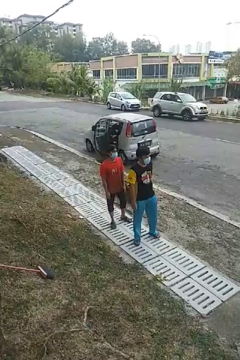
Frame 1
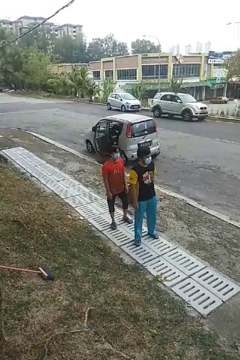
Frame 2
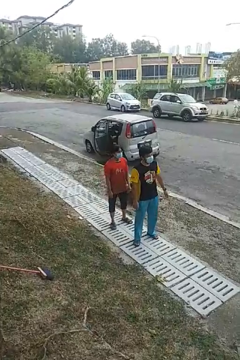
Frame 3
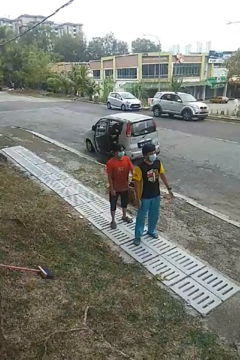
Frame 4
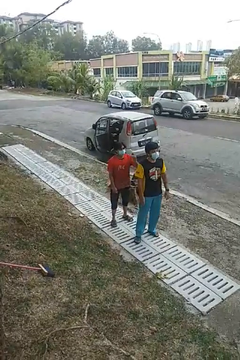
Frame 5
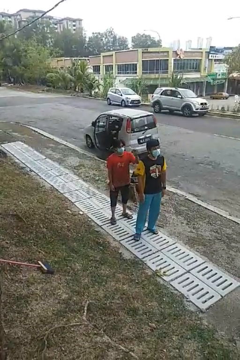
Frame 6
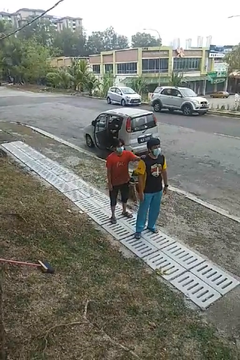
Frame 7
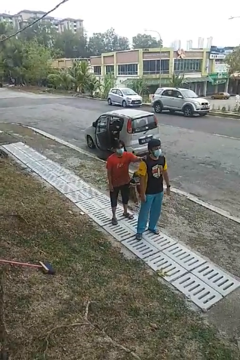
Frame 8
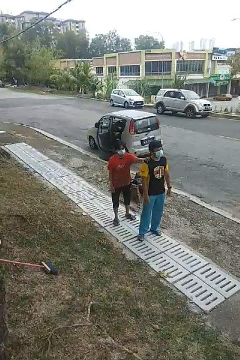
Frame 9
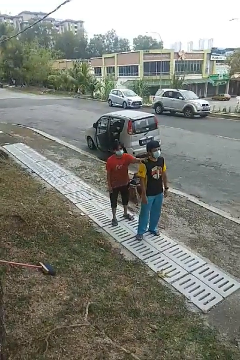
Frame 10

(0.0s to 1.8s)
person grabs person by shoulder

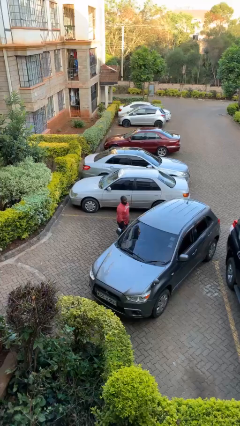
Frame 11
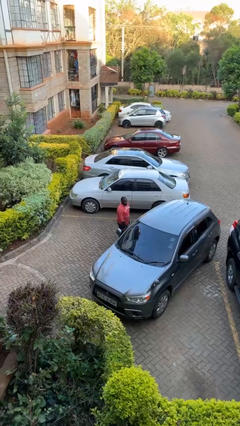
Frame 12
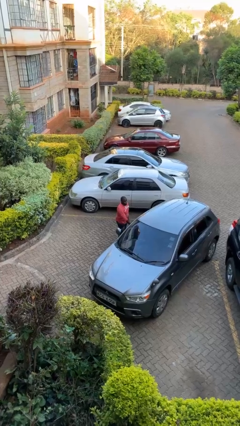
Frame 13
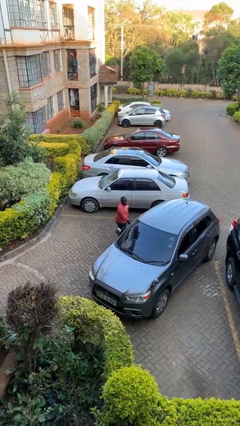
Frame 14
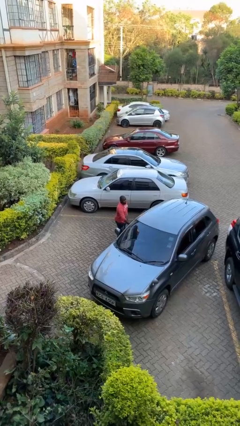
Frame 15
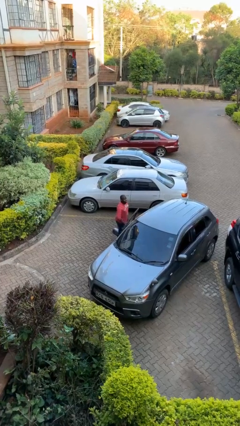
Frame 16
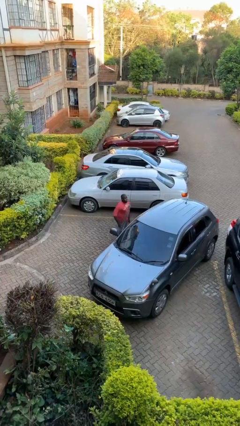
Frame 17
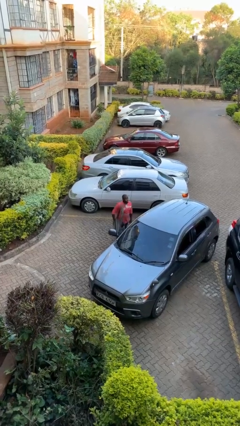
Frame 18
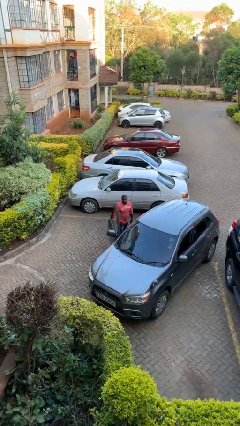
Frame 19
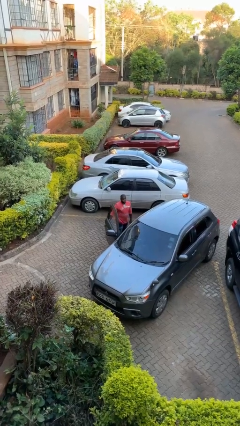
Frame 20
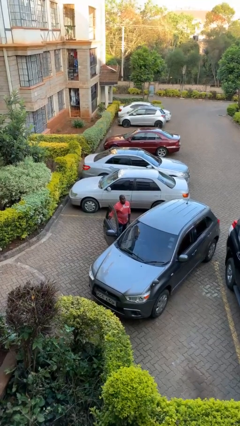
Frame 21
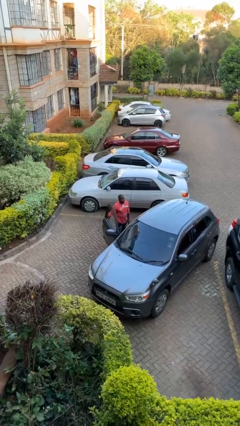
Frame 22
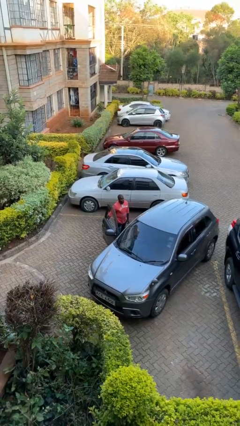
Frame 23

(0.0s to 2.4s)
person opens car door

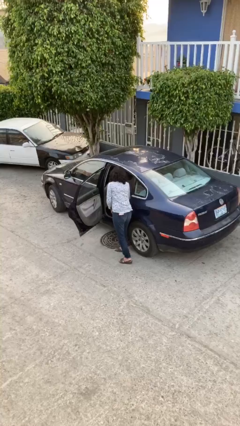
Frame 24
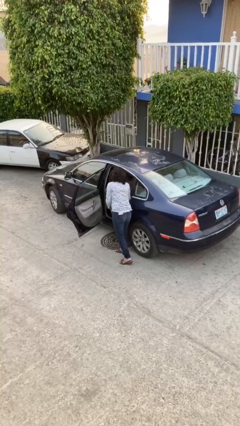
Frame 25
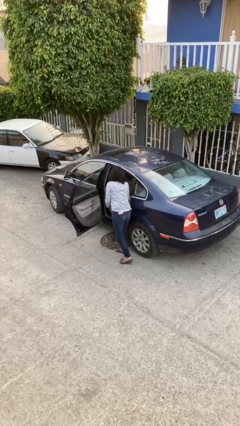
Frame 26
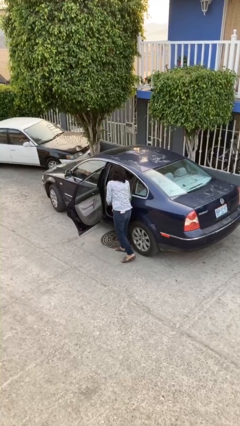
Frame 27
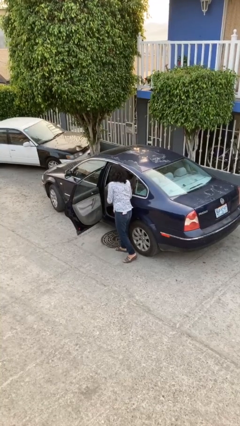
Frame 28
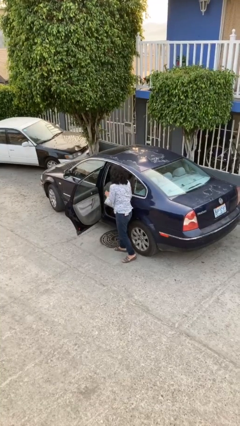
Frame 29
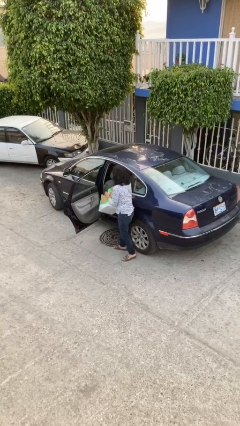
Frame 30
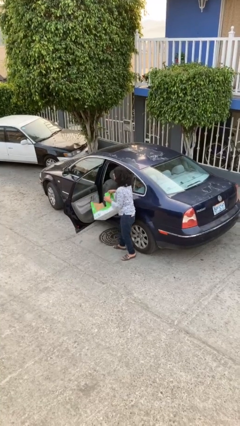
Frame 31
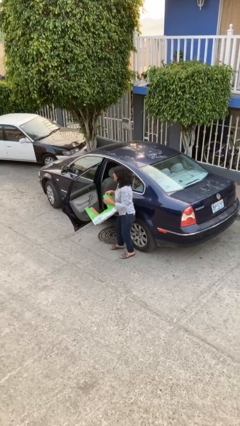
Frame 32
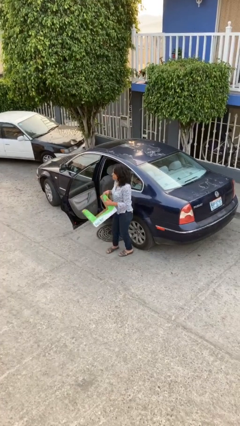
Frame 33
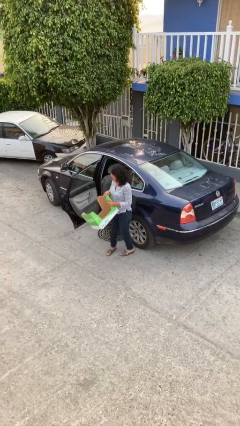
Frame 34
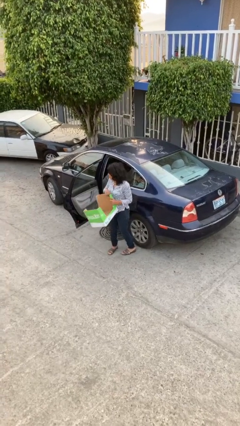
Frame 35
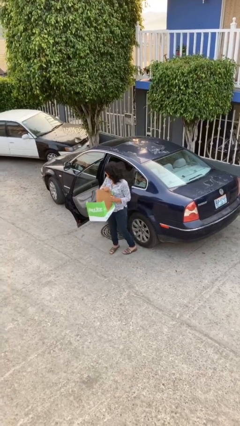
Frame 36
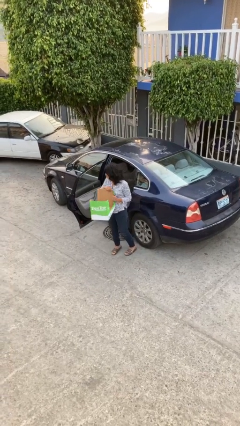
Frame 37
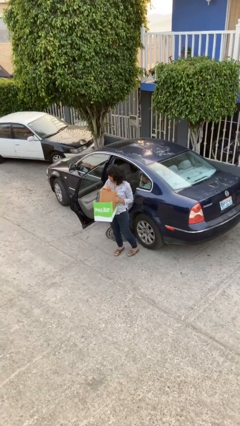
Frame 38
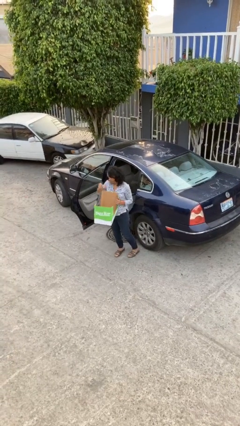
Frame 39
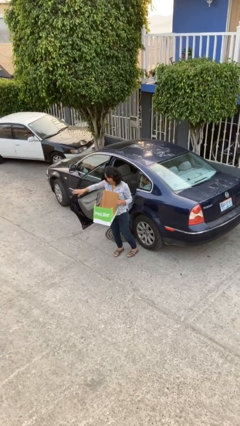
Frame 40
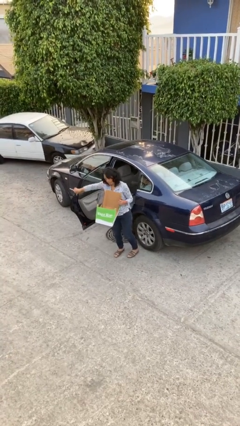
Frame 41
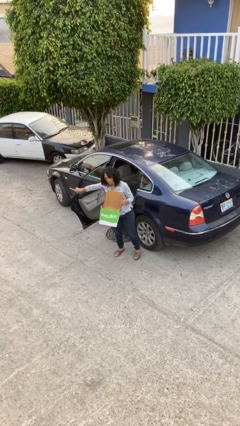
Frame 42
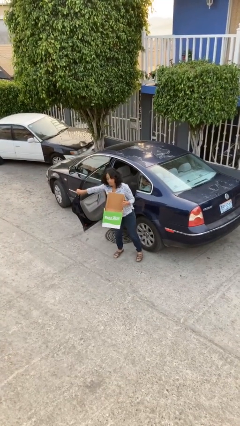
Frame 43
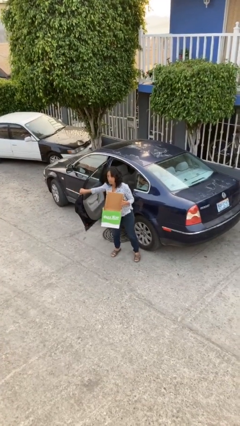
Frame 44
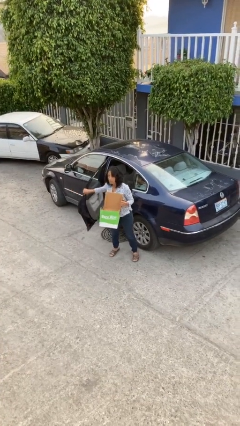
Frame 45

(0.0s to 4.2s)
person unloads car

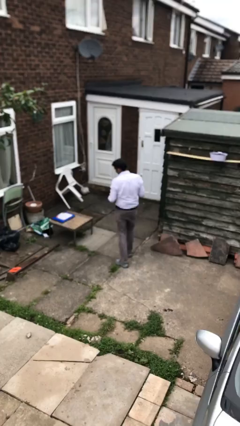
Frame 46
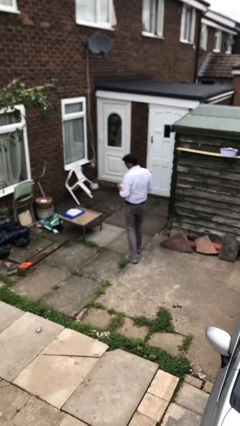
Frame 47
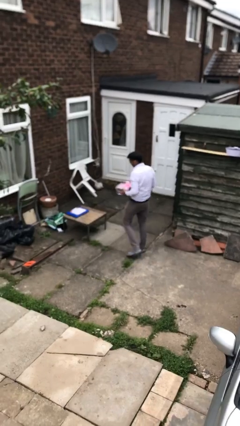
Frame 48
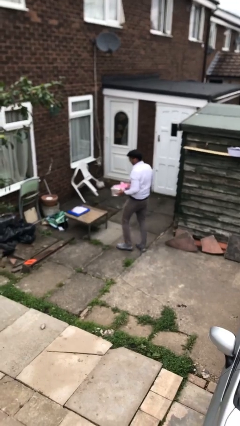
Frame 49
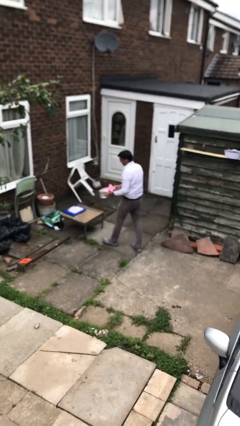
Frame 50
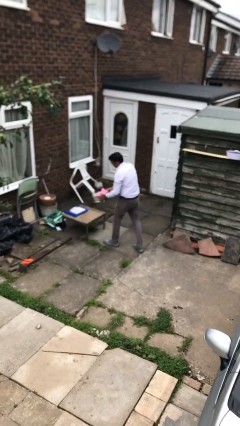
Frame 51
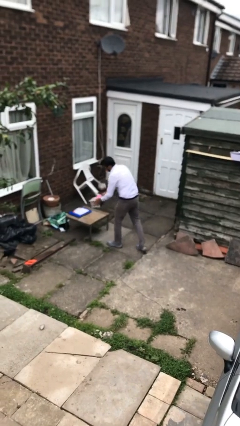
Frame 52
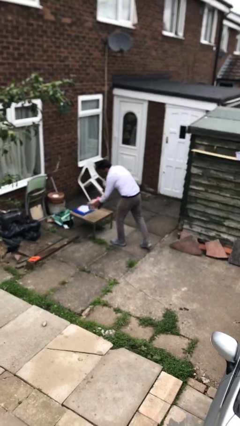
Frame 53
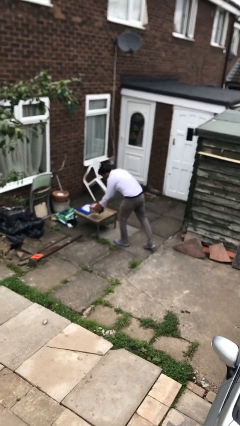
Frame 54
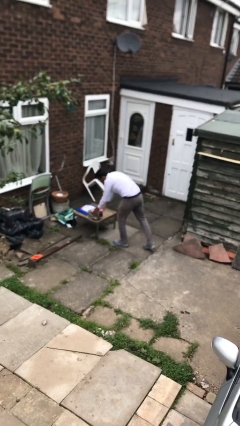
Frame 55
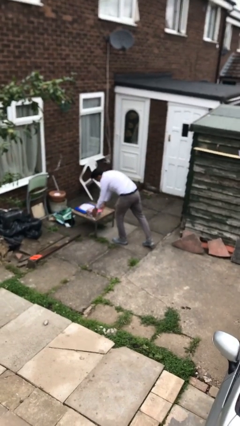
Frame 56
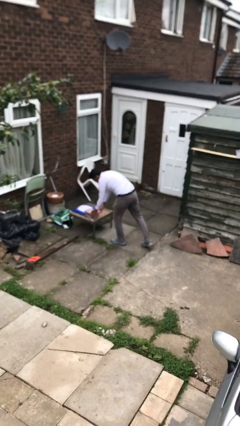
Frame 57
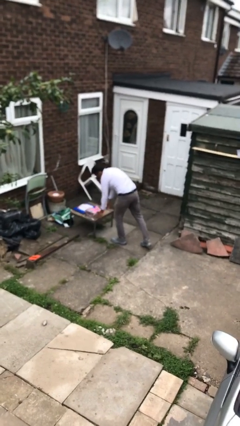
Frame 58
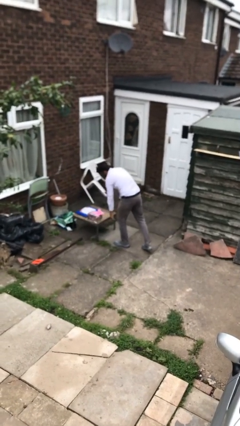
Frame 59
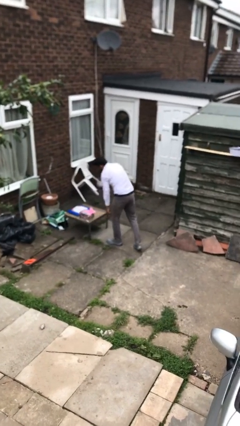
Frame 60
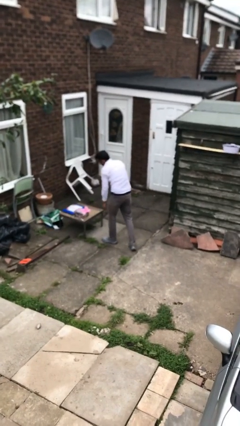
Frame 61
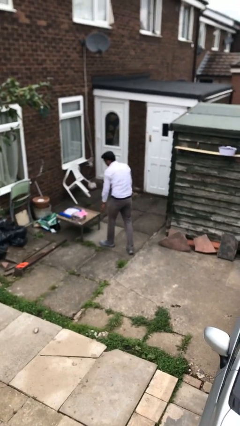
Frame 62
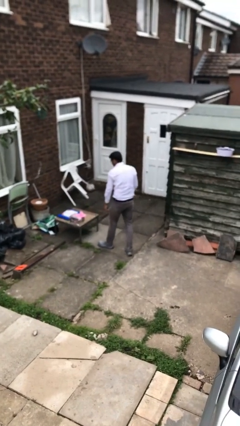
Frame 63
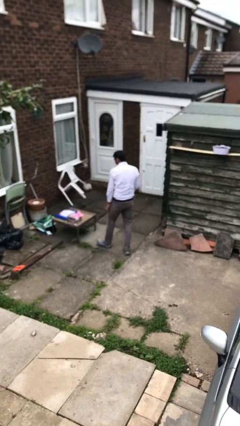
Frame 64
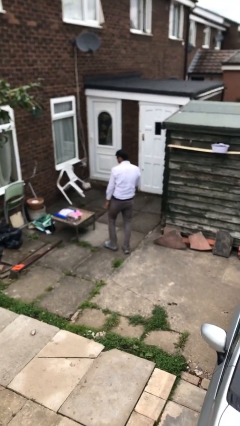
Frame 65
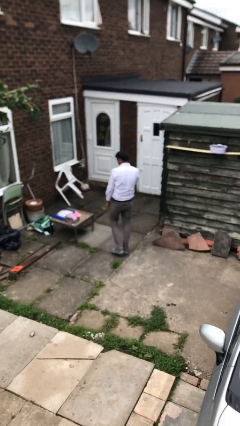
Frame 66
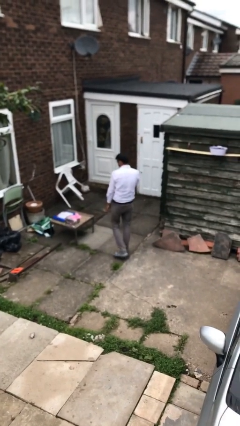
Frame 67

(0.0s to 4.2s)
person puts down object on table

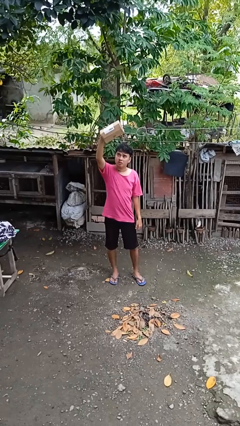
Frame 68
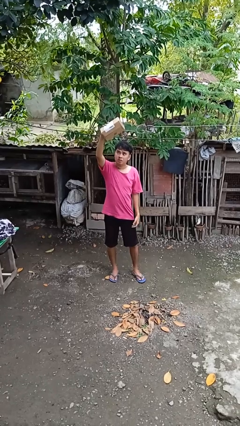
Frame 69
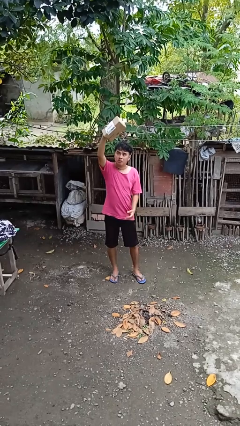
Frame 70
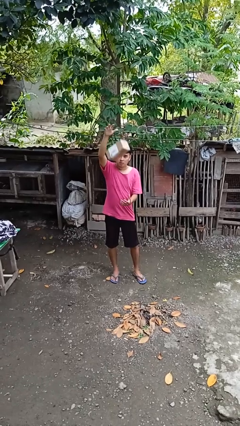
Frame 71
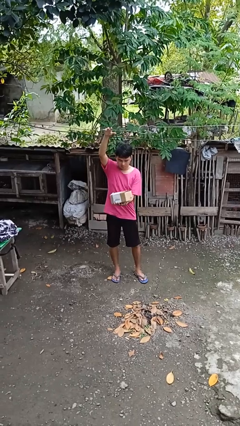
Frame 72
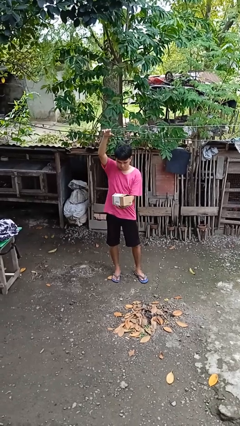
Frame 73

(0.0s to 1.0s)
person drops object

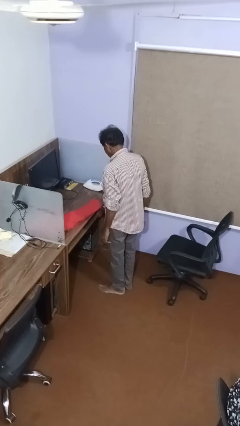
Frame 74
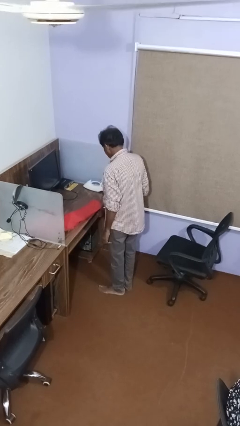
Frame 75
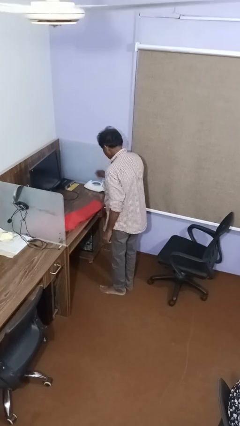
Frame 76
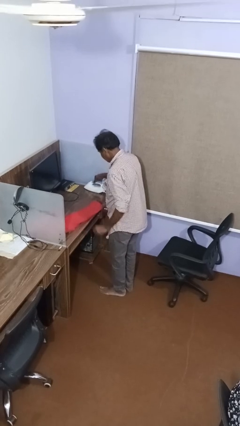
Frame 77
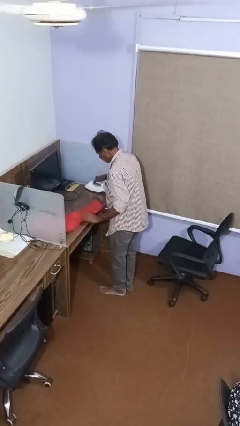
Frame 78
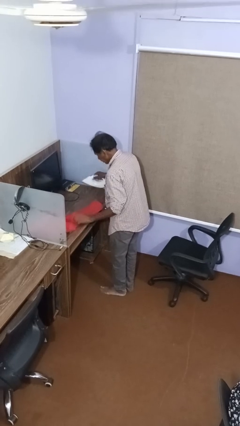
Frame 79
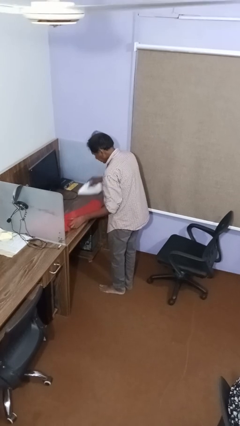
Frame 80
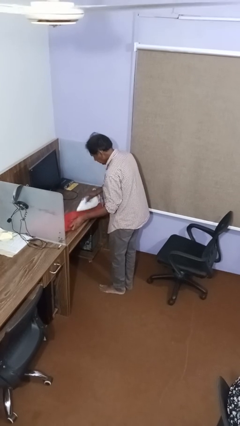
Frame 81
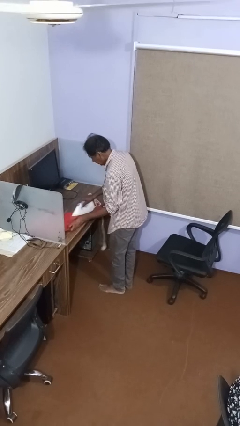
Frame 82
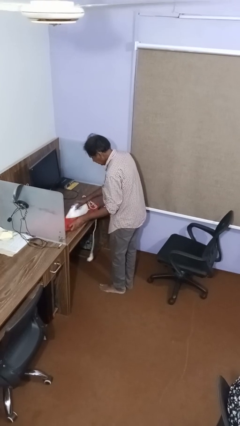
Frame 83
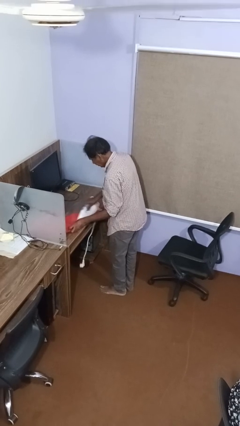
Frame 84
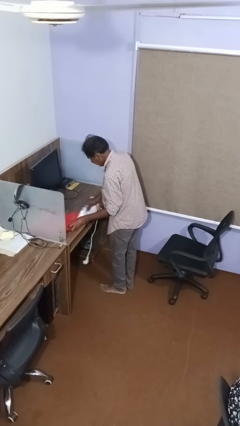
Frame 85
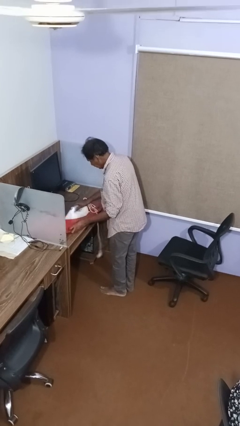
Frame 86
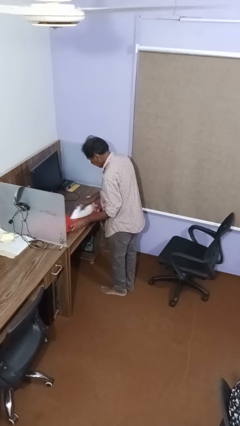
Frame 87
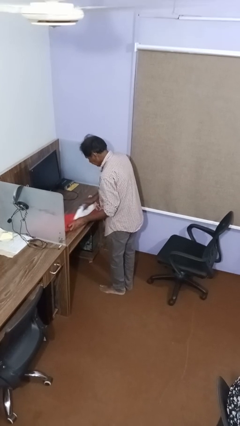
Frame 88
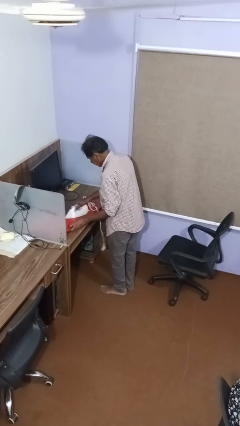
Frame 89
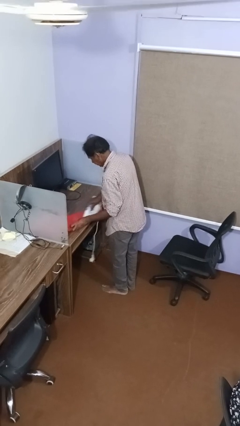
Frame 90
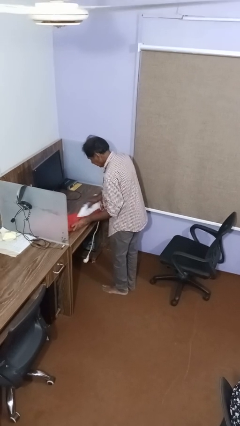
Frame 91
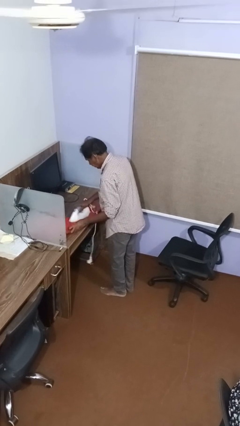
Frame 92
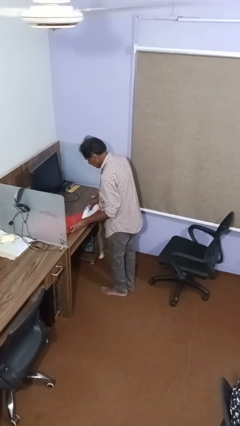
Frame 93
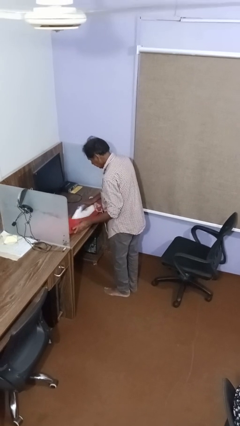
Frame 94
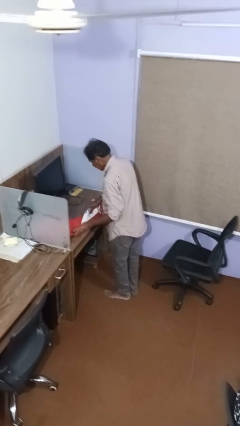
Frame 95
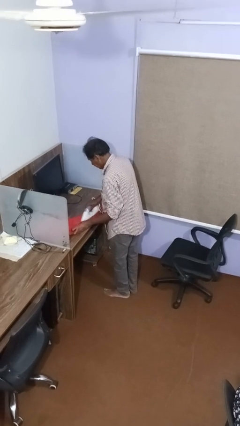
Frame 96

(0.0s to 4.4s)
person irons clothes
